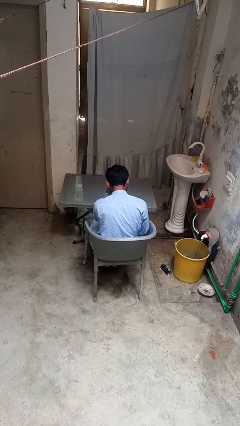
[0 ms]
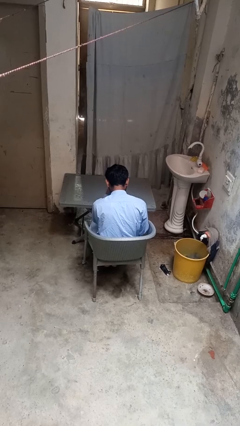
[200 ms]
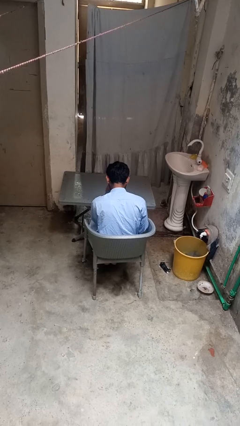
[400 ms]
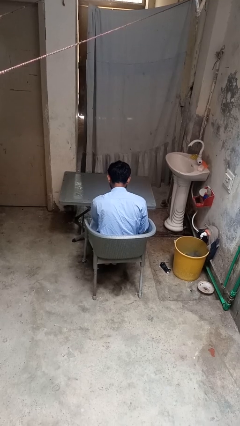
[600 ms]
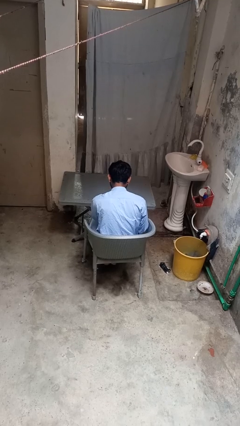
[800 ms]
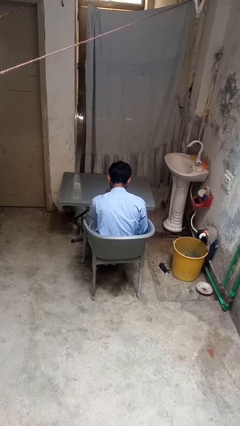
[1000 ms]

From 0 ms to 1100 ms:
person applies foundation makeup

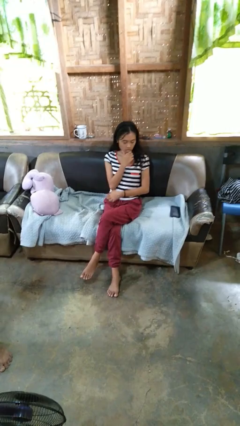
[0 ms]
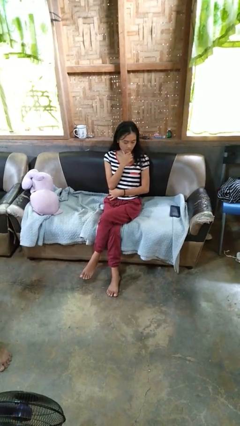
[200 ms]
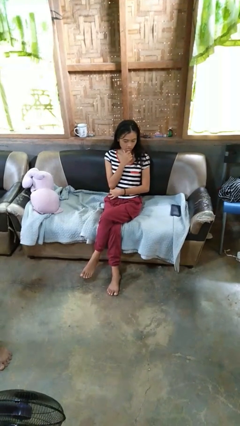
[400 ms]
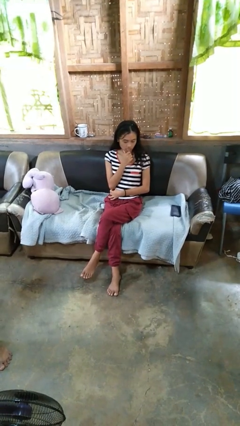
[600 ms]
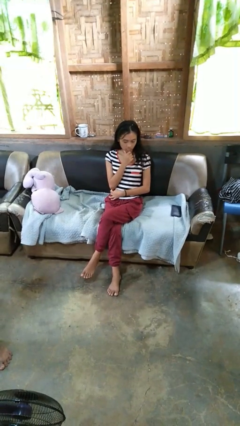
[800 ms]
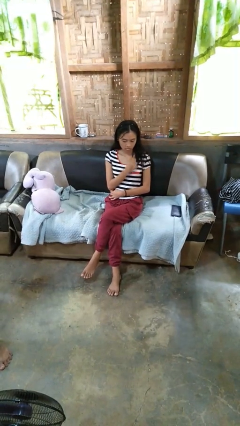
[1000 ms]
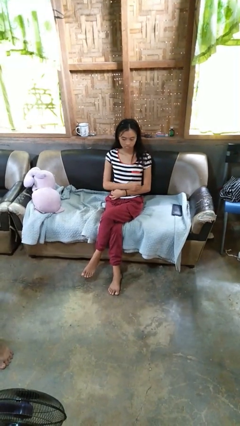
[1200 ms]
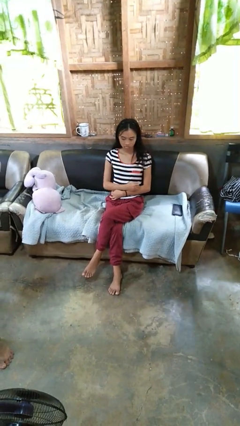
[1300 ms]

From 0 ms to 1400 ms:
person strokes chin

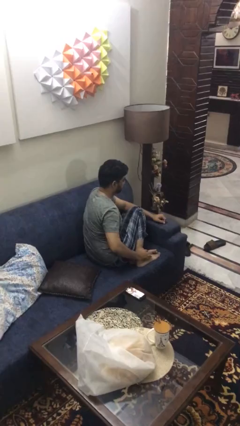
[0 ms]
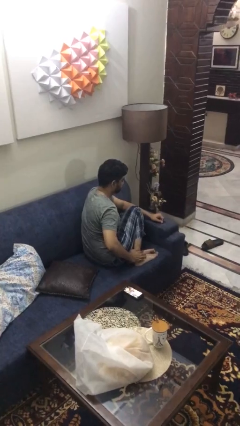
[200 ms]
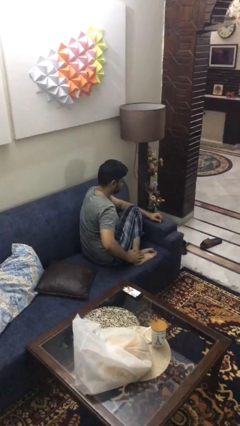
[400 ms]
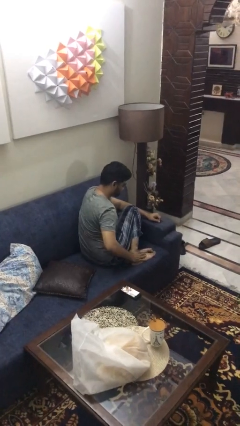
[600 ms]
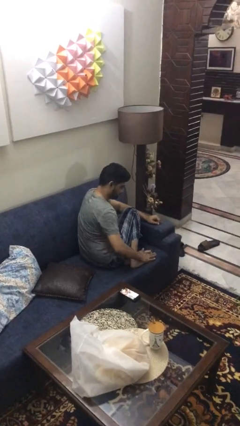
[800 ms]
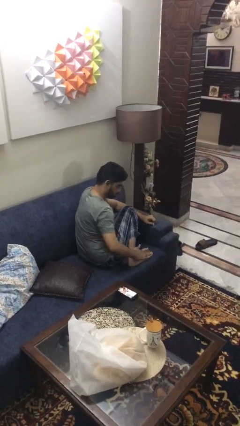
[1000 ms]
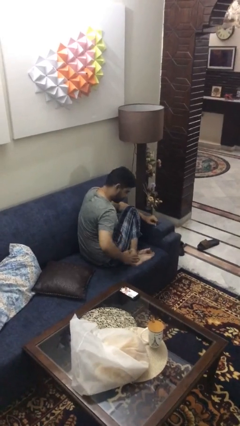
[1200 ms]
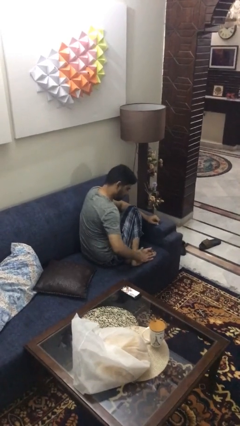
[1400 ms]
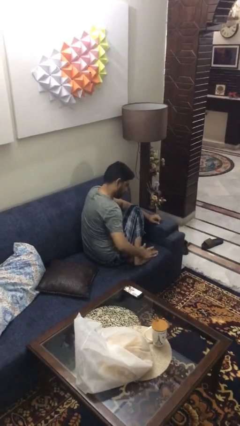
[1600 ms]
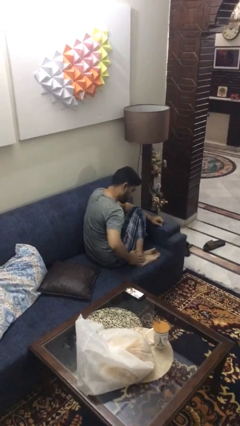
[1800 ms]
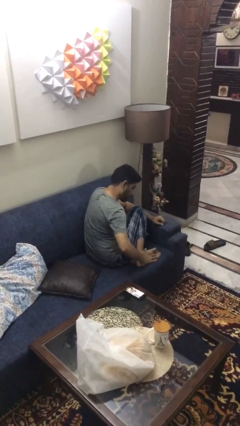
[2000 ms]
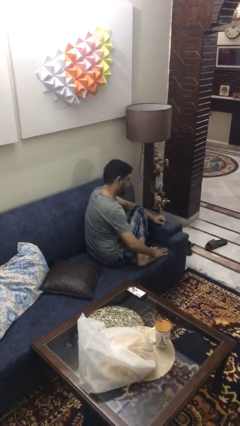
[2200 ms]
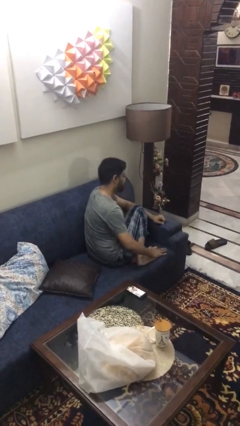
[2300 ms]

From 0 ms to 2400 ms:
person rubs foot

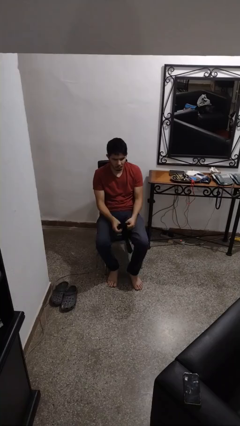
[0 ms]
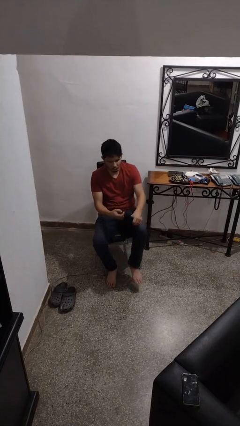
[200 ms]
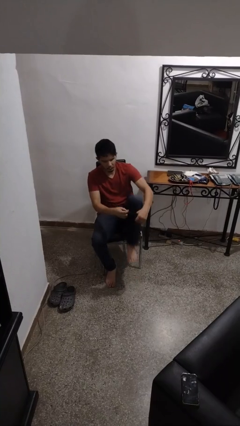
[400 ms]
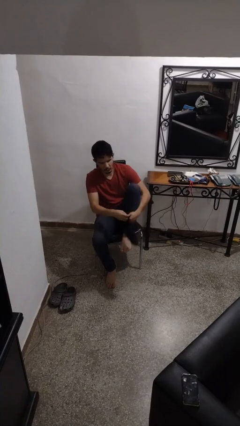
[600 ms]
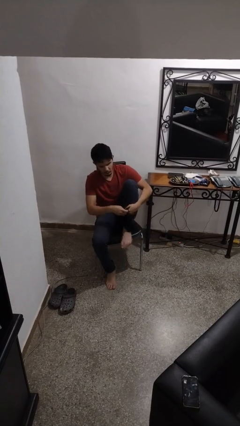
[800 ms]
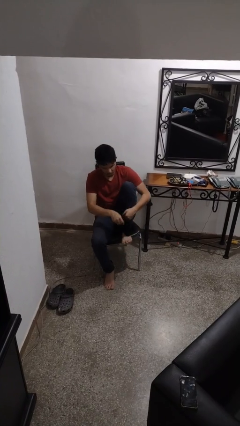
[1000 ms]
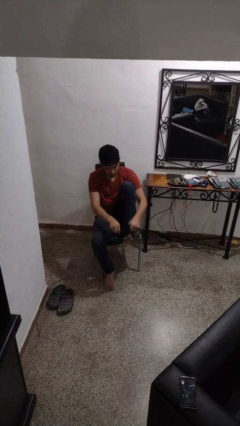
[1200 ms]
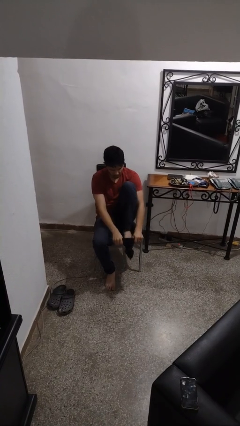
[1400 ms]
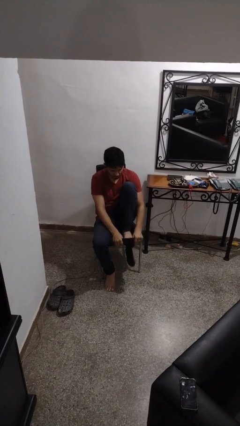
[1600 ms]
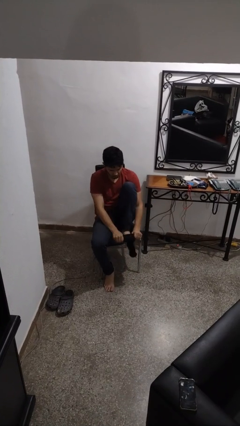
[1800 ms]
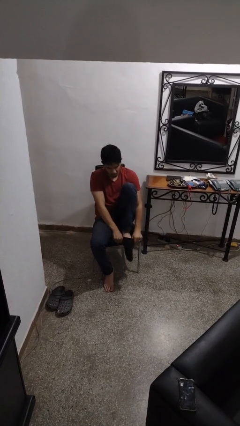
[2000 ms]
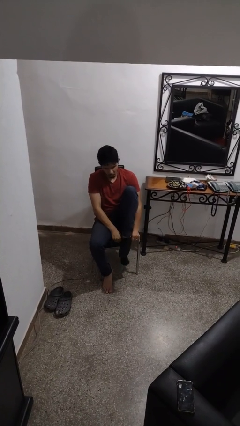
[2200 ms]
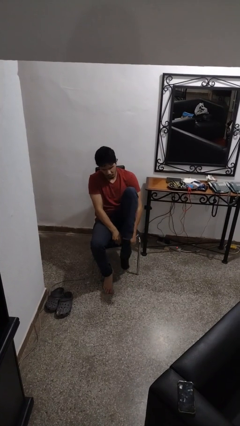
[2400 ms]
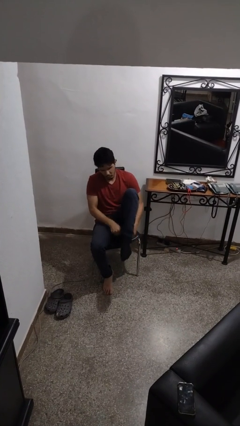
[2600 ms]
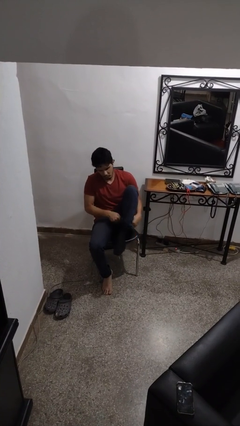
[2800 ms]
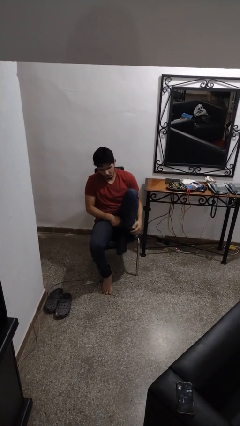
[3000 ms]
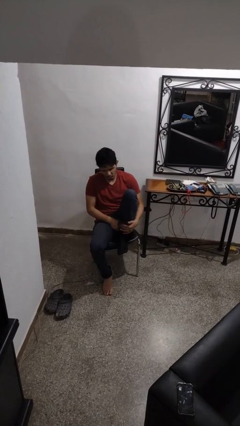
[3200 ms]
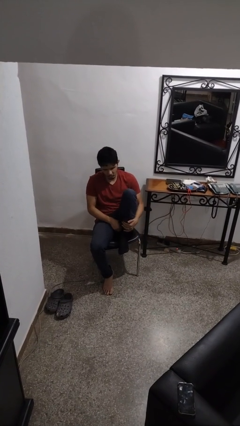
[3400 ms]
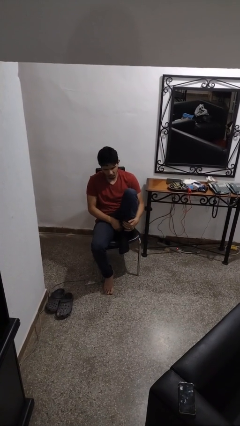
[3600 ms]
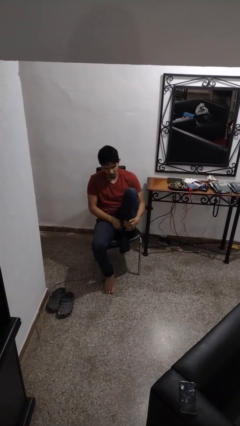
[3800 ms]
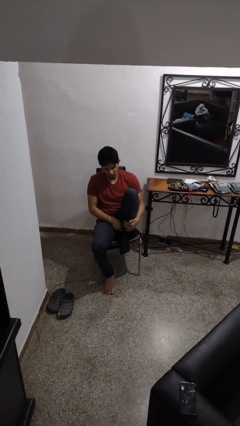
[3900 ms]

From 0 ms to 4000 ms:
person puts on socks

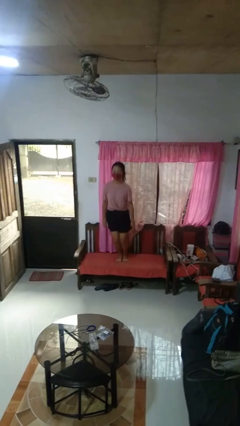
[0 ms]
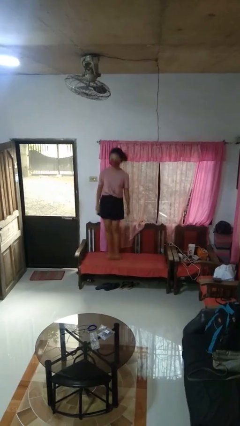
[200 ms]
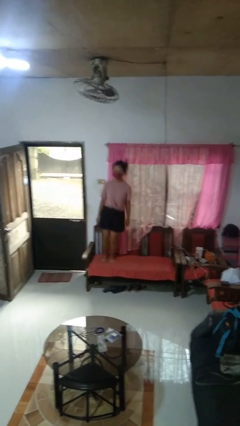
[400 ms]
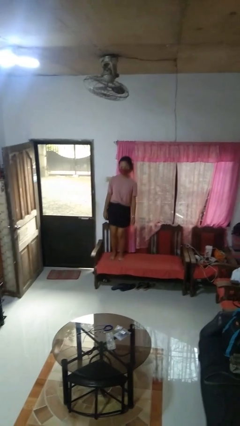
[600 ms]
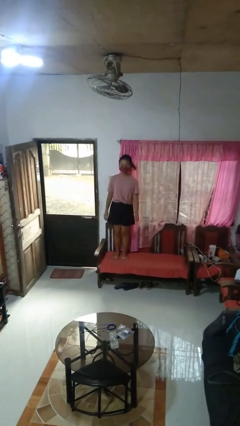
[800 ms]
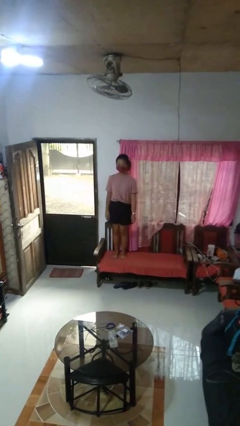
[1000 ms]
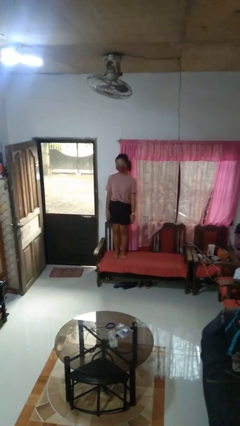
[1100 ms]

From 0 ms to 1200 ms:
person jumps on couch

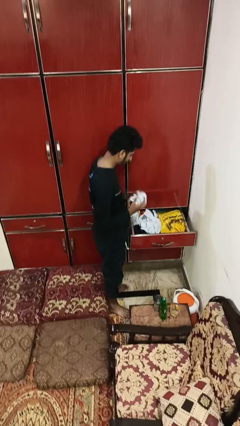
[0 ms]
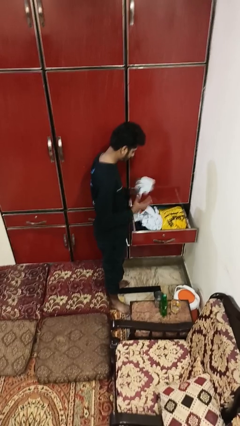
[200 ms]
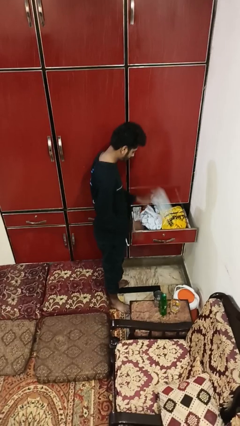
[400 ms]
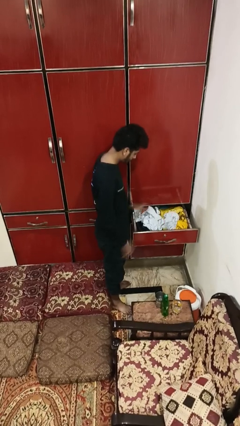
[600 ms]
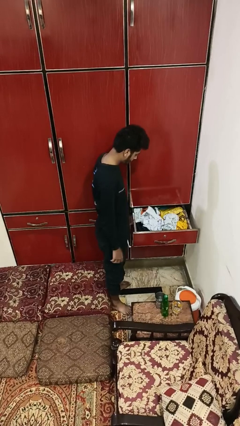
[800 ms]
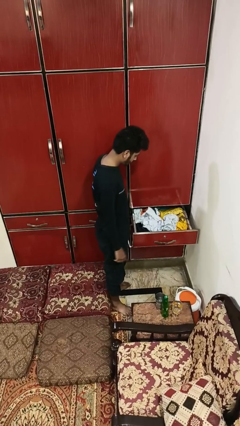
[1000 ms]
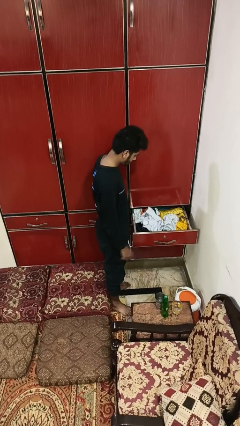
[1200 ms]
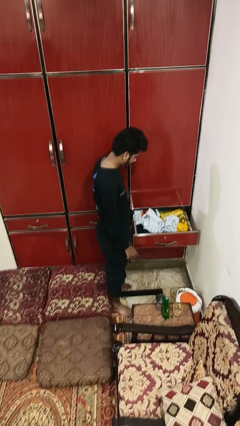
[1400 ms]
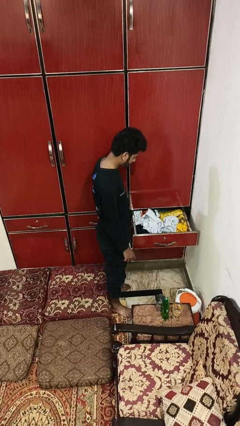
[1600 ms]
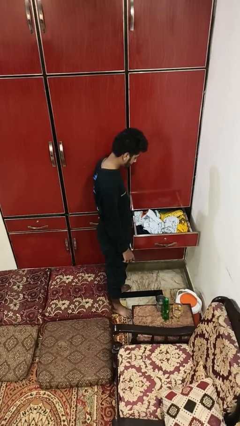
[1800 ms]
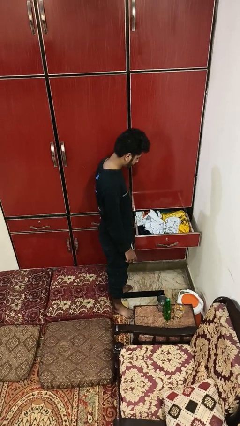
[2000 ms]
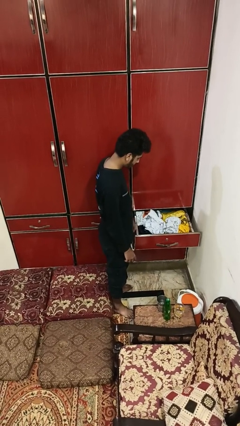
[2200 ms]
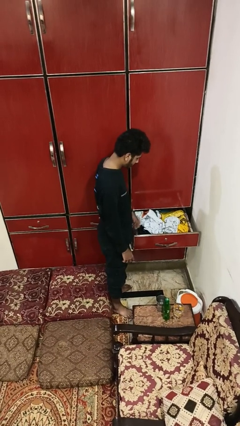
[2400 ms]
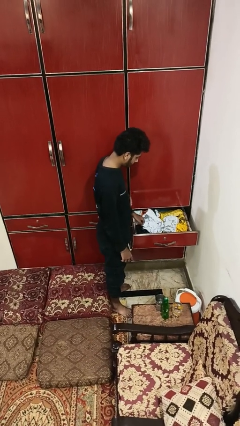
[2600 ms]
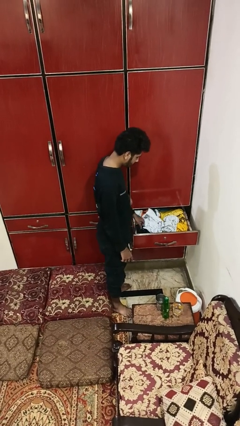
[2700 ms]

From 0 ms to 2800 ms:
person puts clothes into dresser

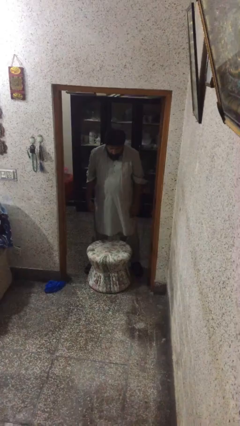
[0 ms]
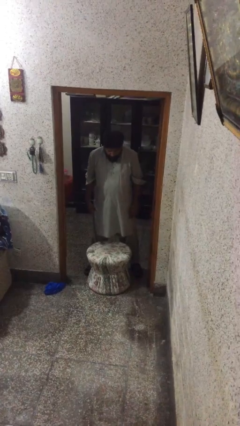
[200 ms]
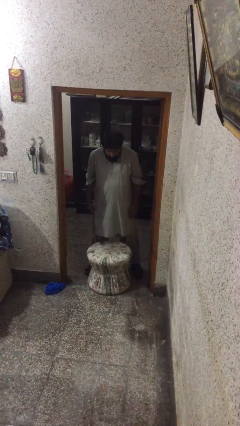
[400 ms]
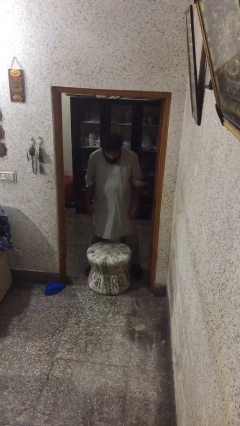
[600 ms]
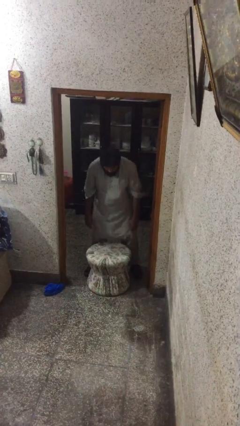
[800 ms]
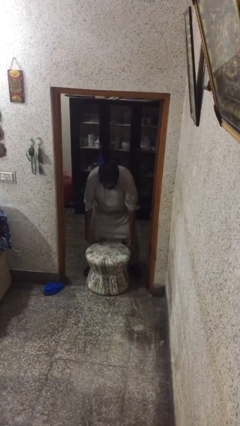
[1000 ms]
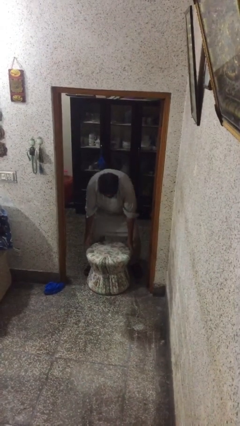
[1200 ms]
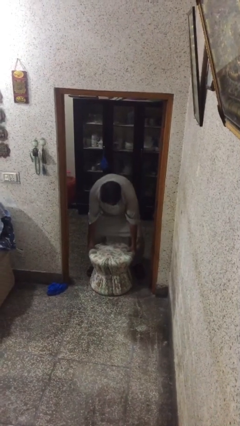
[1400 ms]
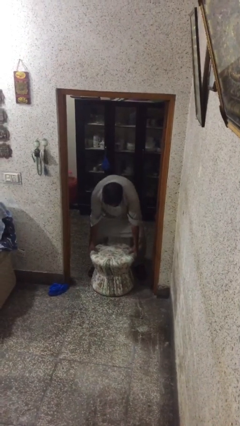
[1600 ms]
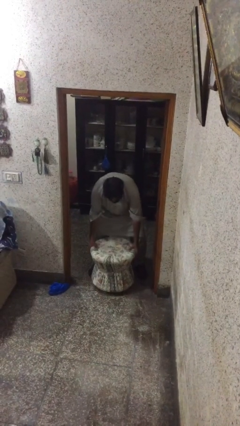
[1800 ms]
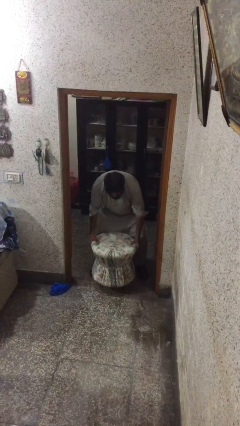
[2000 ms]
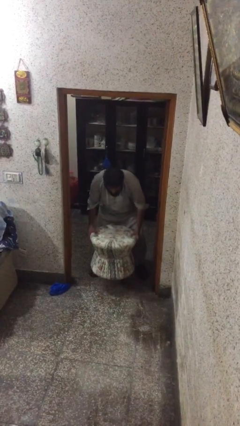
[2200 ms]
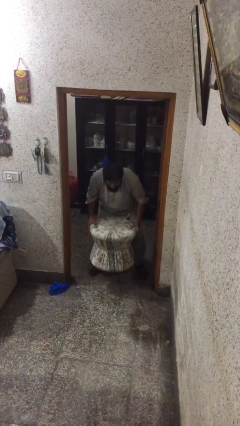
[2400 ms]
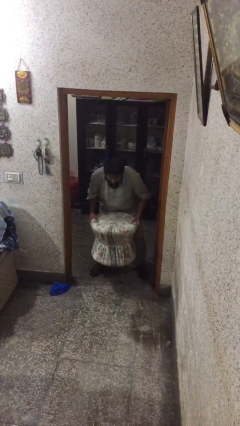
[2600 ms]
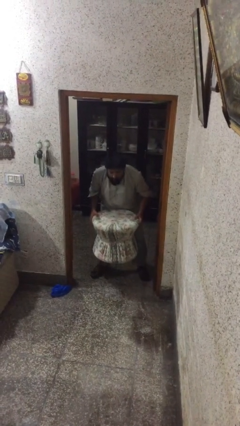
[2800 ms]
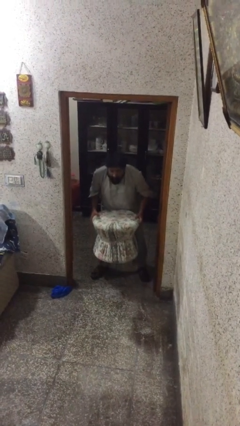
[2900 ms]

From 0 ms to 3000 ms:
person picks up object from floor

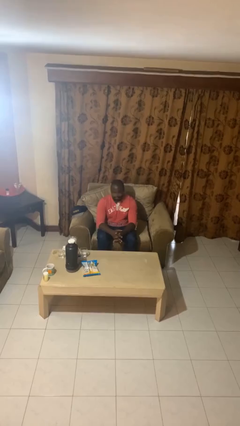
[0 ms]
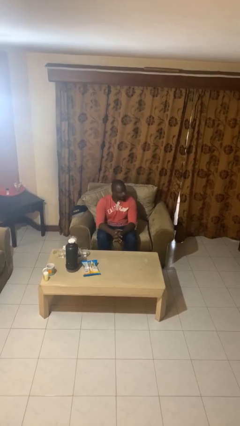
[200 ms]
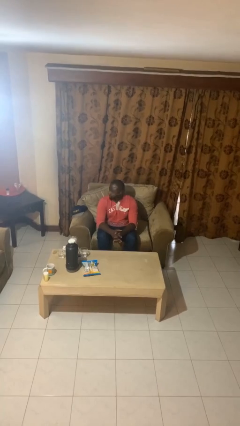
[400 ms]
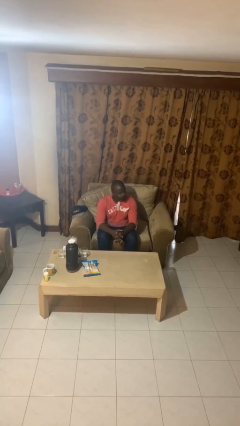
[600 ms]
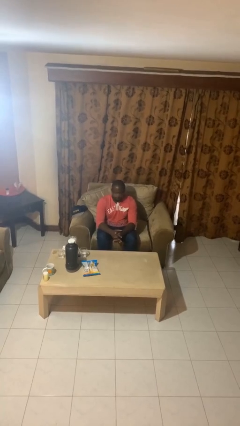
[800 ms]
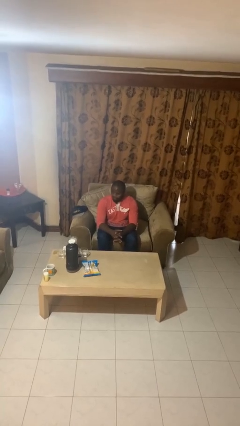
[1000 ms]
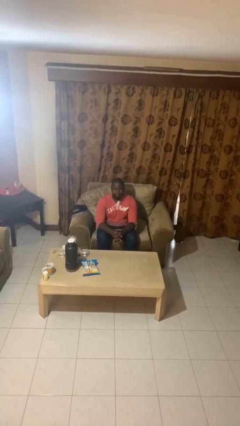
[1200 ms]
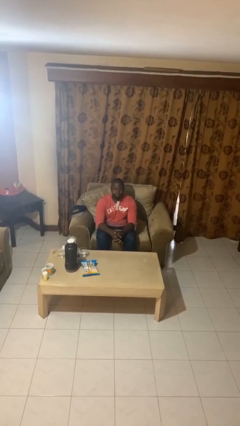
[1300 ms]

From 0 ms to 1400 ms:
person shakes head
